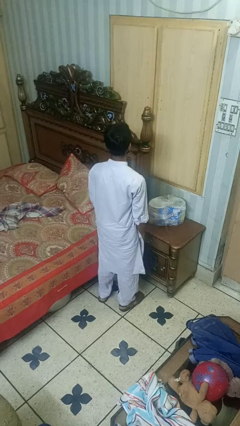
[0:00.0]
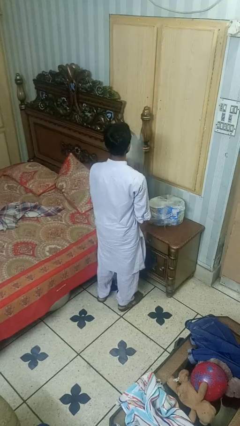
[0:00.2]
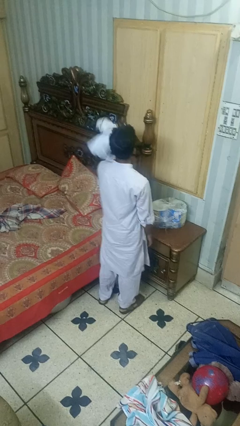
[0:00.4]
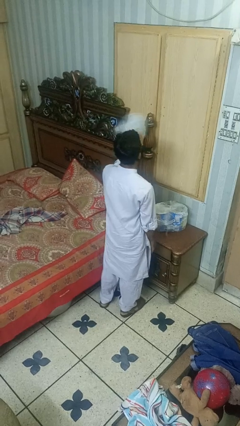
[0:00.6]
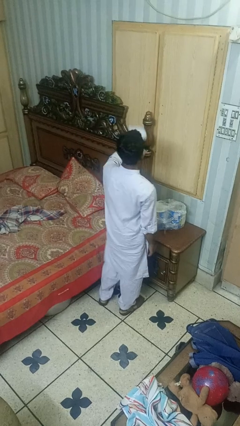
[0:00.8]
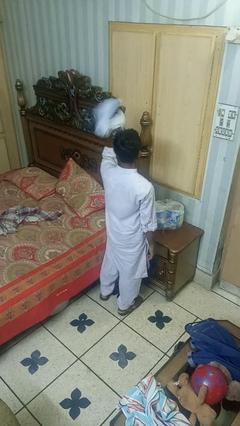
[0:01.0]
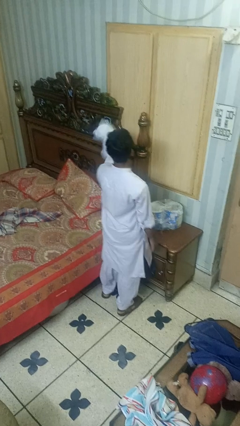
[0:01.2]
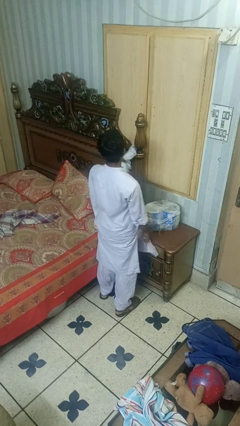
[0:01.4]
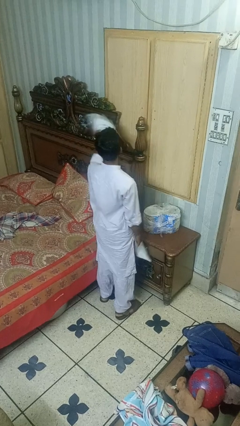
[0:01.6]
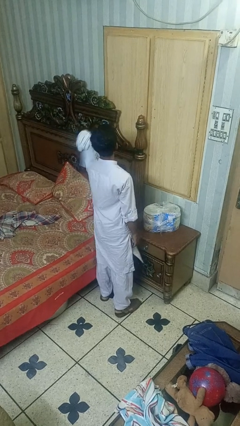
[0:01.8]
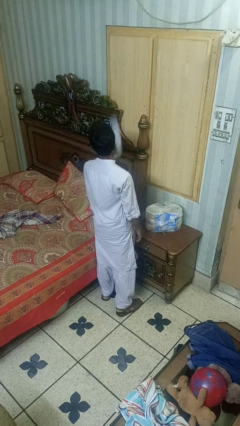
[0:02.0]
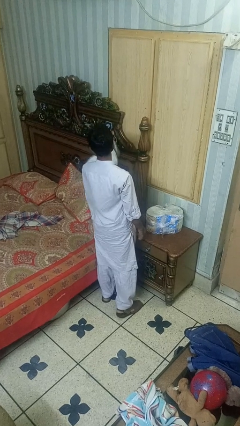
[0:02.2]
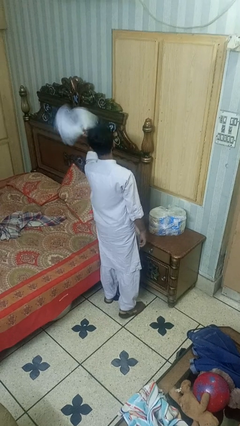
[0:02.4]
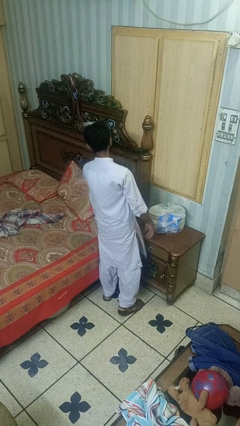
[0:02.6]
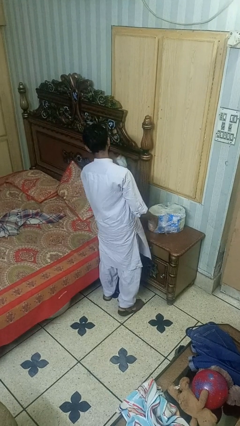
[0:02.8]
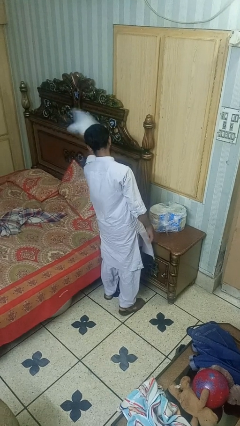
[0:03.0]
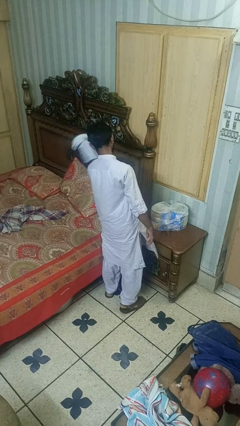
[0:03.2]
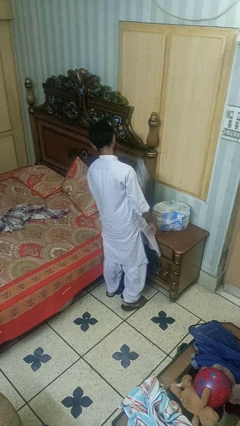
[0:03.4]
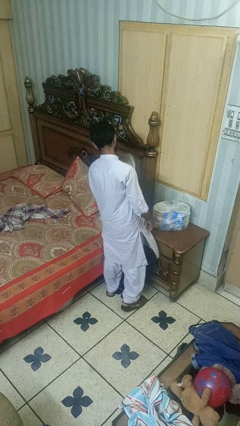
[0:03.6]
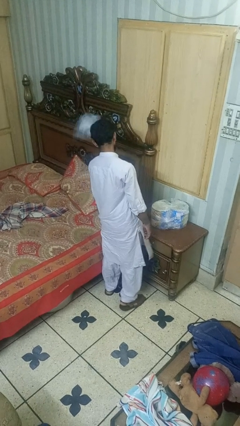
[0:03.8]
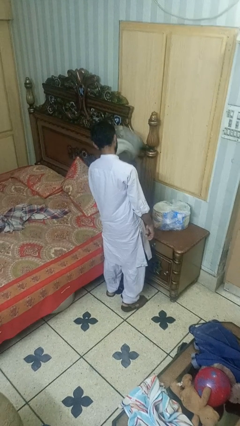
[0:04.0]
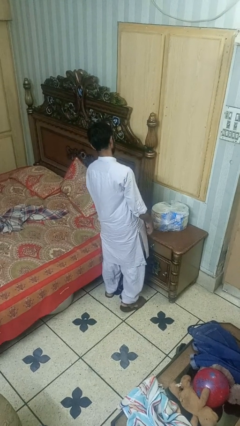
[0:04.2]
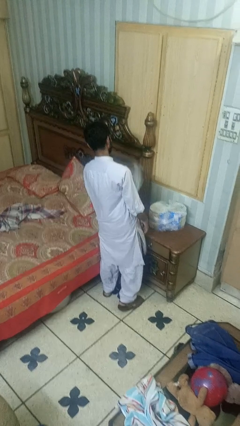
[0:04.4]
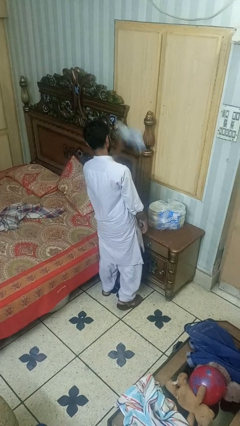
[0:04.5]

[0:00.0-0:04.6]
person dusts furniture

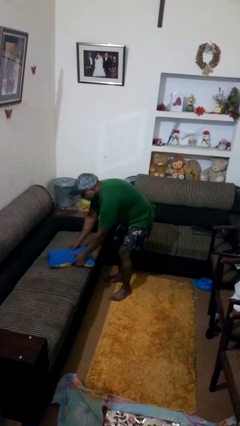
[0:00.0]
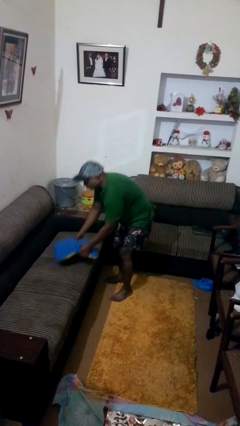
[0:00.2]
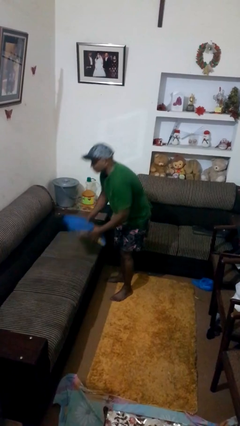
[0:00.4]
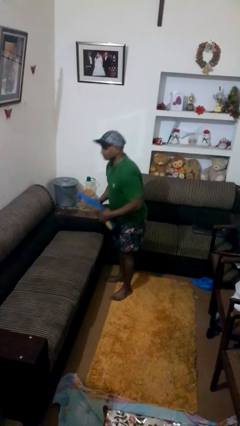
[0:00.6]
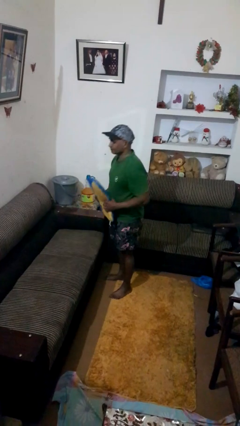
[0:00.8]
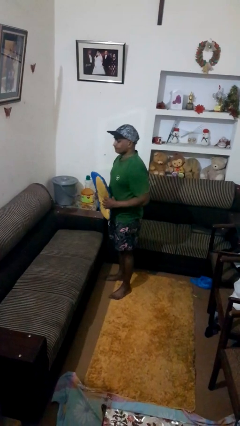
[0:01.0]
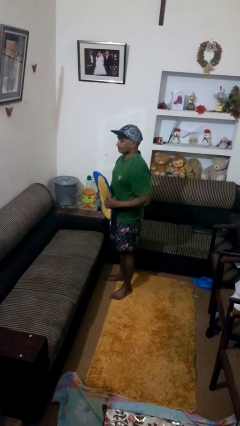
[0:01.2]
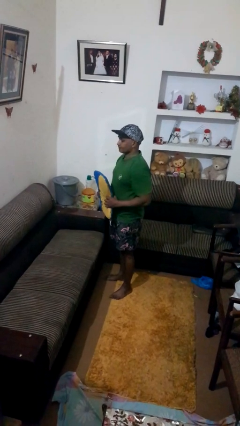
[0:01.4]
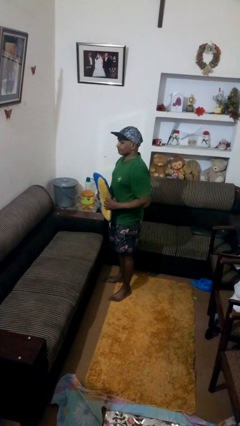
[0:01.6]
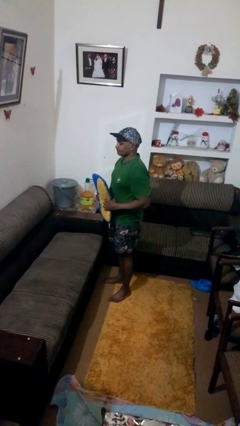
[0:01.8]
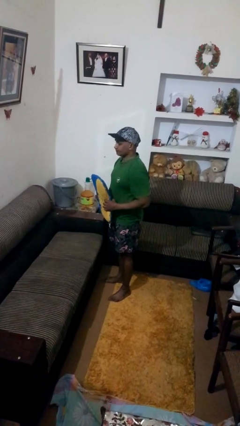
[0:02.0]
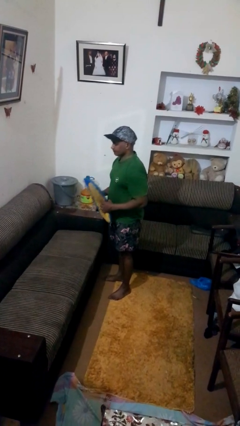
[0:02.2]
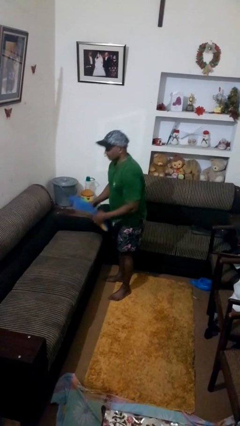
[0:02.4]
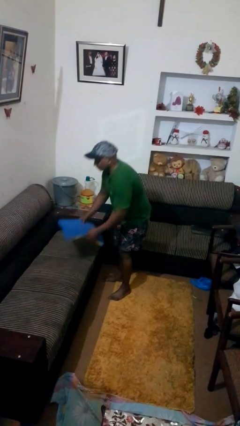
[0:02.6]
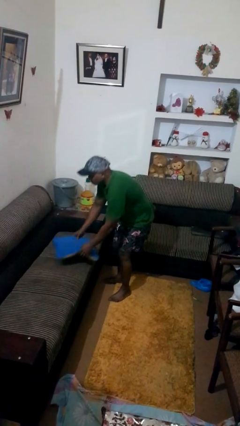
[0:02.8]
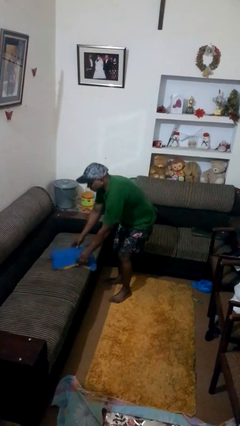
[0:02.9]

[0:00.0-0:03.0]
person picks up object from couch

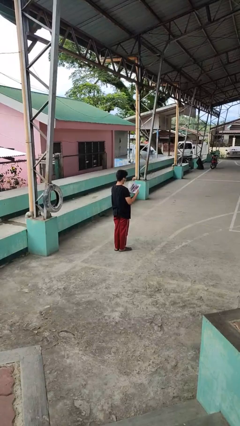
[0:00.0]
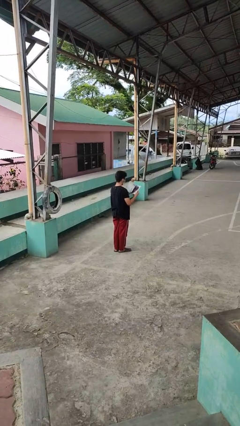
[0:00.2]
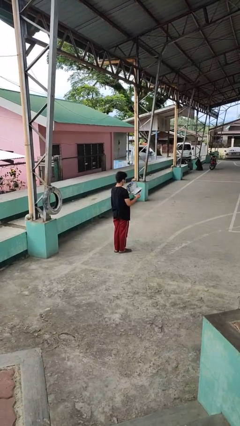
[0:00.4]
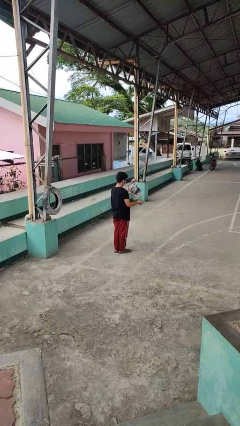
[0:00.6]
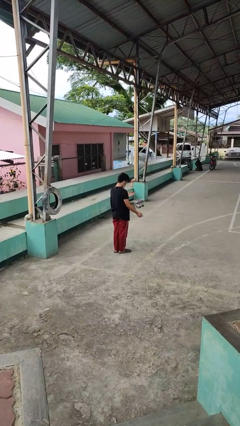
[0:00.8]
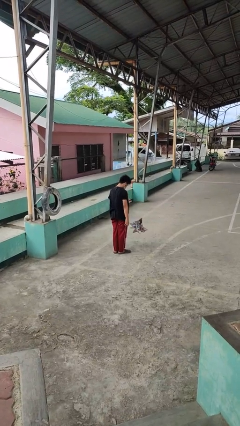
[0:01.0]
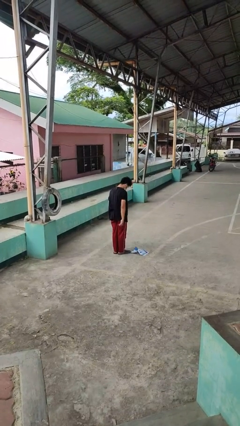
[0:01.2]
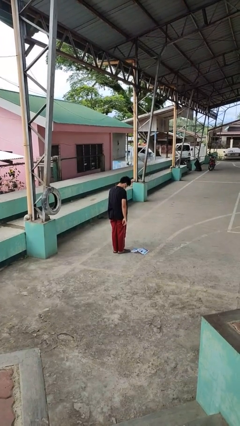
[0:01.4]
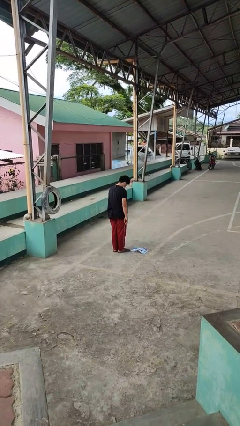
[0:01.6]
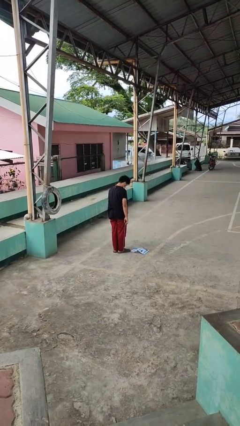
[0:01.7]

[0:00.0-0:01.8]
person drops object

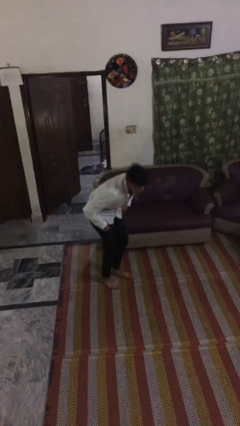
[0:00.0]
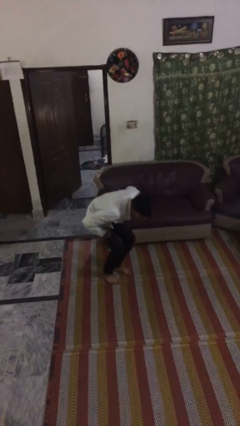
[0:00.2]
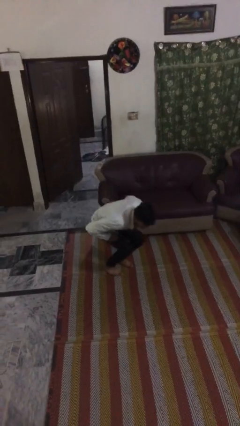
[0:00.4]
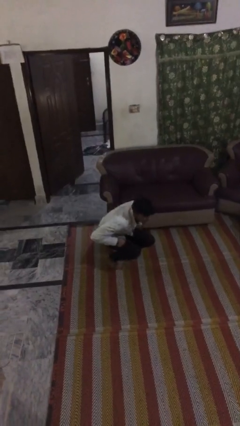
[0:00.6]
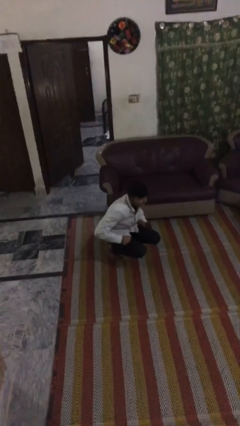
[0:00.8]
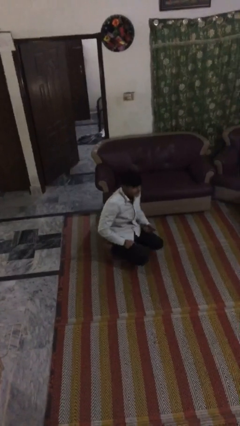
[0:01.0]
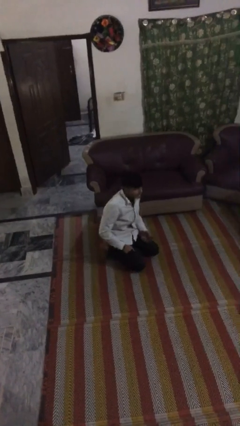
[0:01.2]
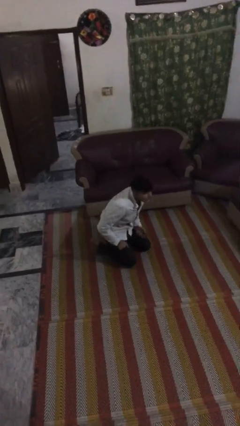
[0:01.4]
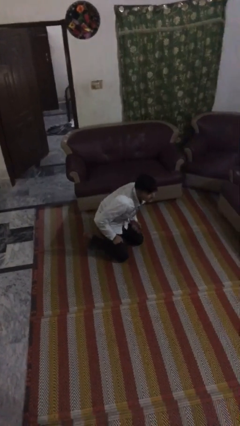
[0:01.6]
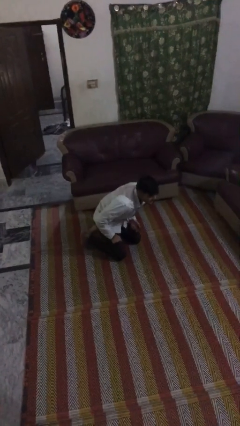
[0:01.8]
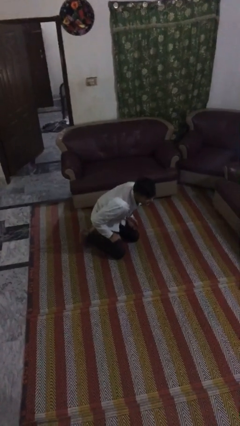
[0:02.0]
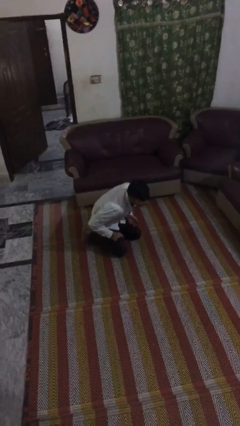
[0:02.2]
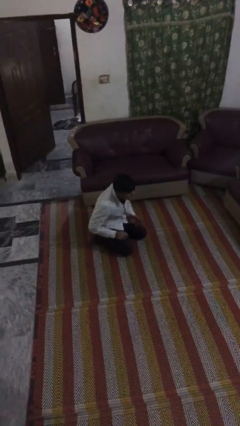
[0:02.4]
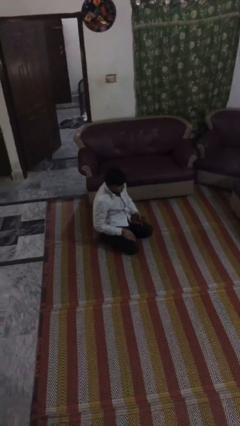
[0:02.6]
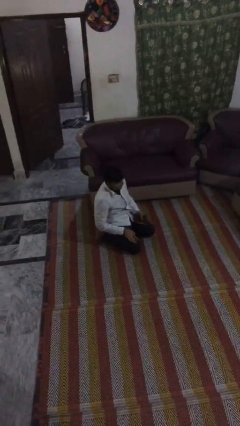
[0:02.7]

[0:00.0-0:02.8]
person sits down

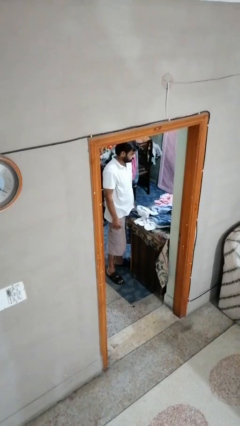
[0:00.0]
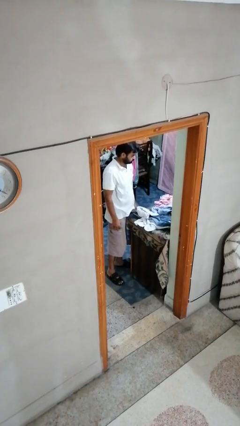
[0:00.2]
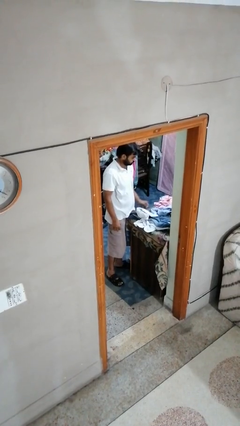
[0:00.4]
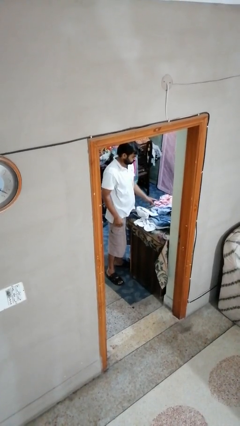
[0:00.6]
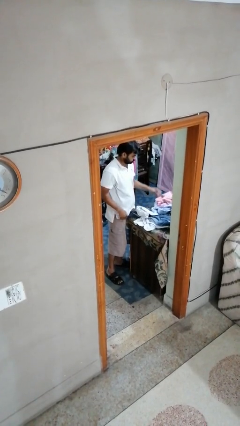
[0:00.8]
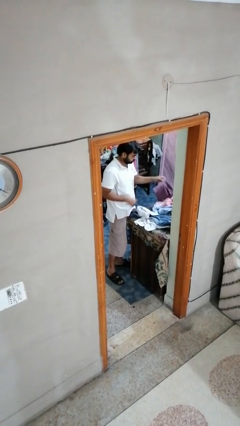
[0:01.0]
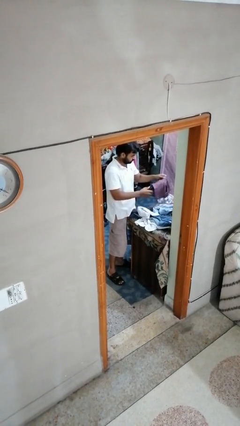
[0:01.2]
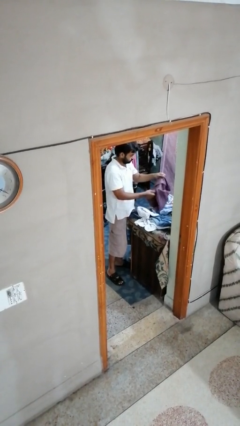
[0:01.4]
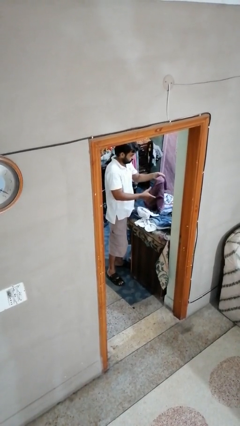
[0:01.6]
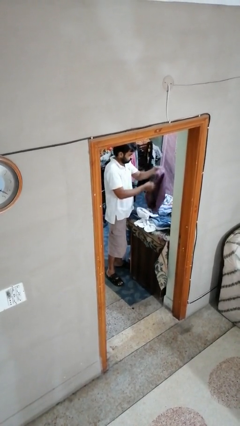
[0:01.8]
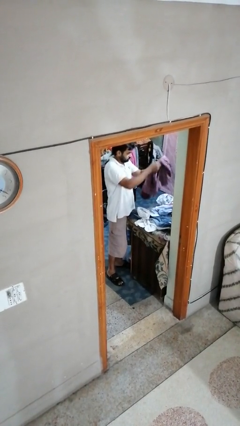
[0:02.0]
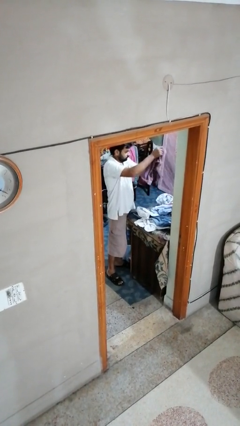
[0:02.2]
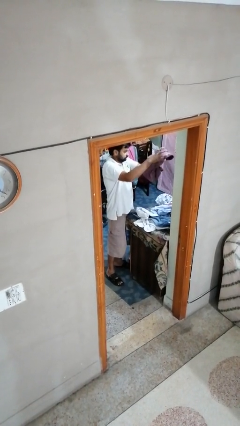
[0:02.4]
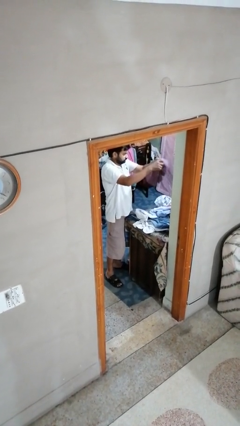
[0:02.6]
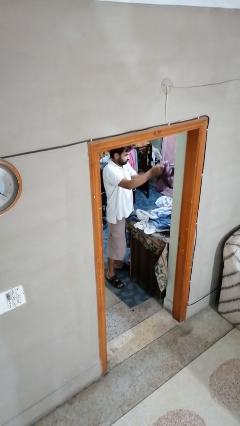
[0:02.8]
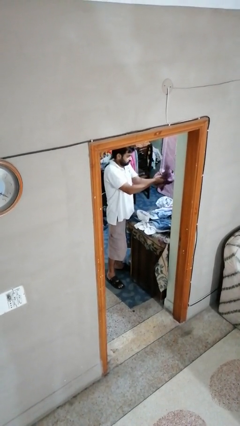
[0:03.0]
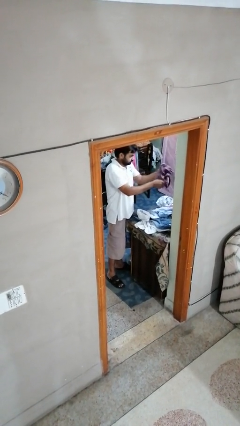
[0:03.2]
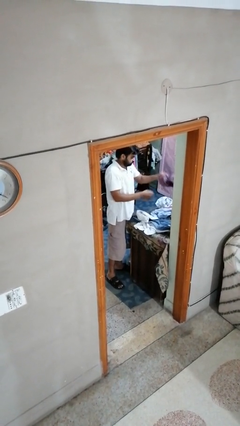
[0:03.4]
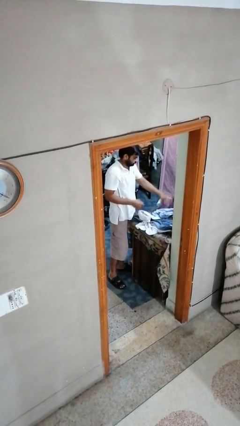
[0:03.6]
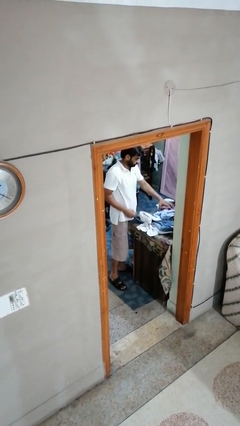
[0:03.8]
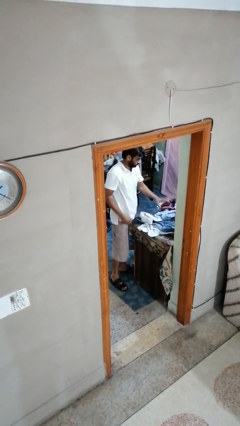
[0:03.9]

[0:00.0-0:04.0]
person folds shirt

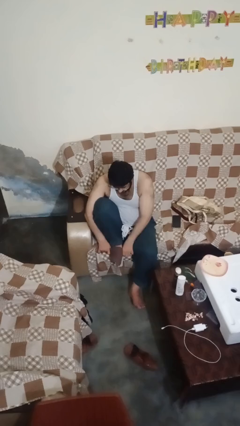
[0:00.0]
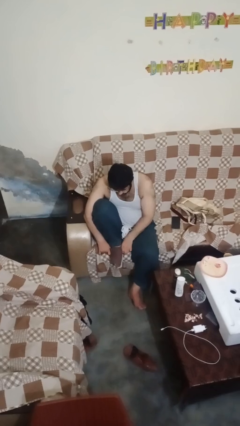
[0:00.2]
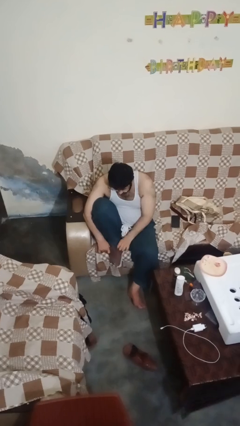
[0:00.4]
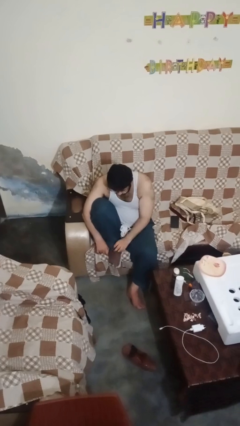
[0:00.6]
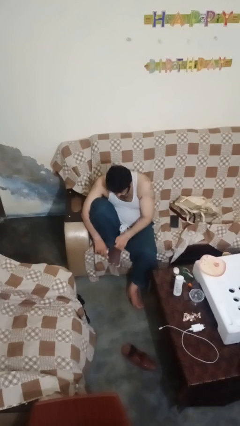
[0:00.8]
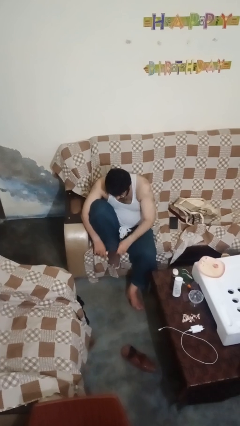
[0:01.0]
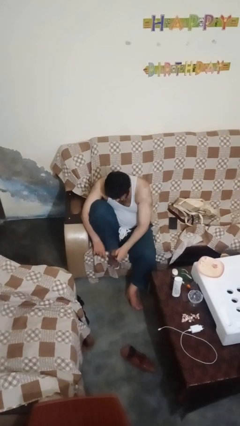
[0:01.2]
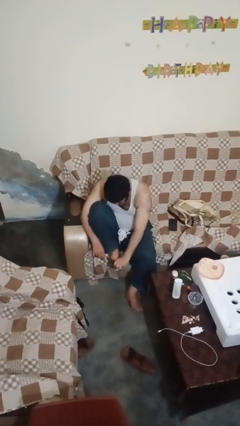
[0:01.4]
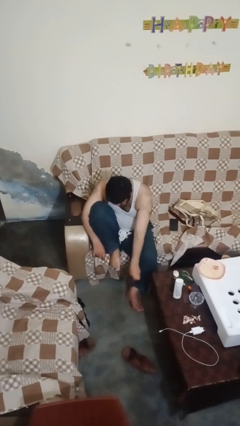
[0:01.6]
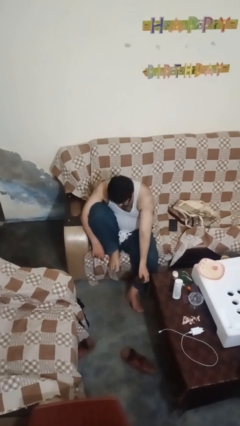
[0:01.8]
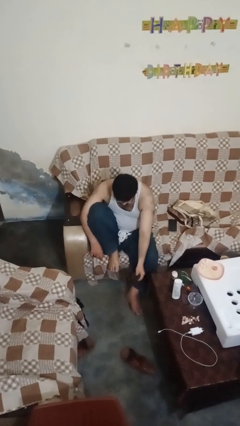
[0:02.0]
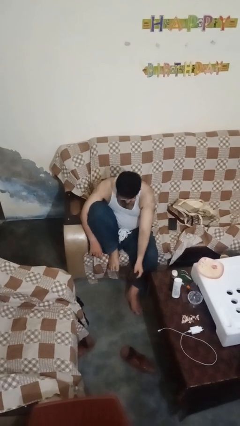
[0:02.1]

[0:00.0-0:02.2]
person takes off socks
